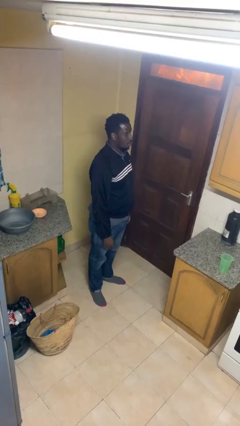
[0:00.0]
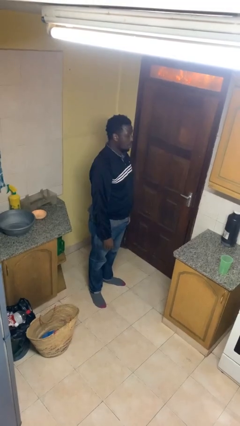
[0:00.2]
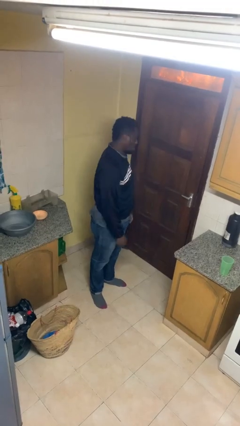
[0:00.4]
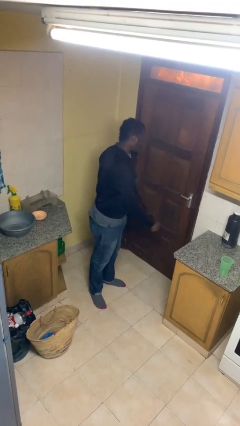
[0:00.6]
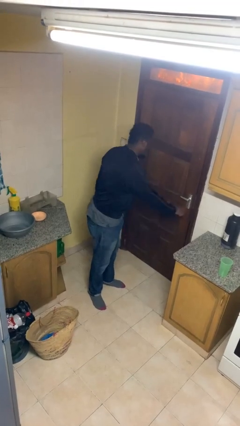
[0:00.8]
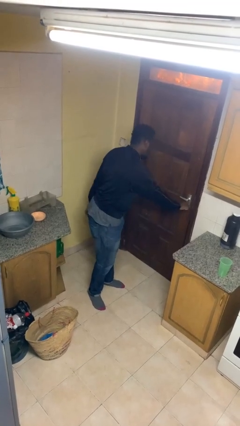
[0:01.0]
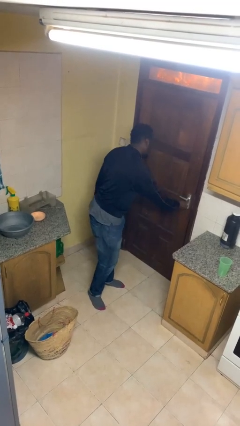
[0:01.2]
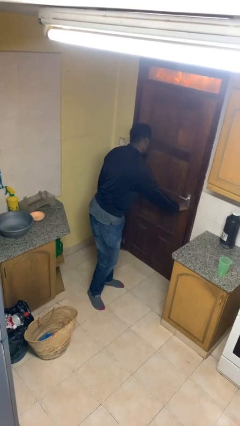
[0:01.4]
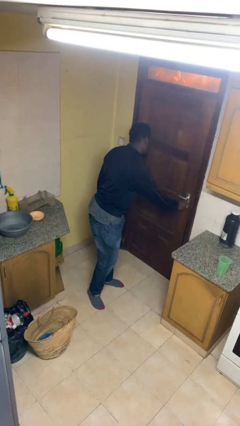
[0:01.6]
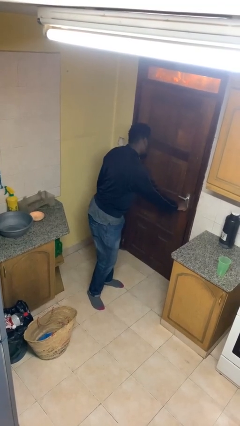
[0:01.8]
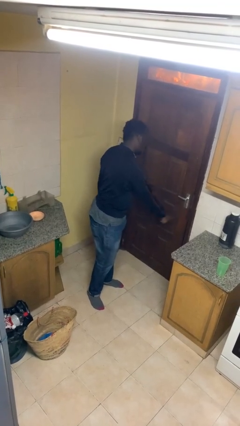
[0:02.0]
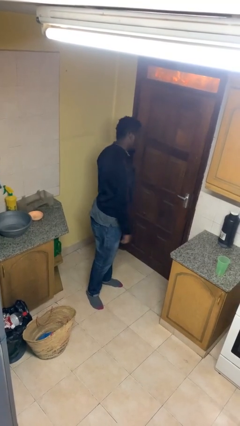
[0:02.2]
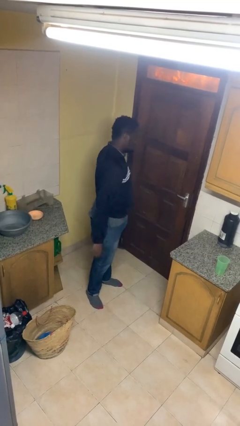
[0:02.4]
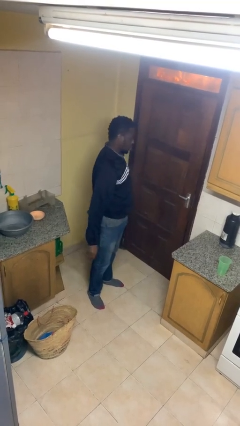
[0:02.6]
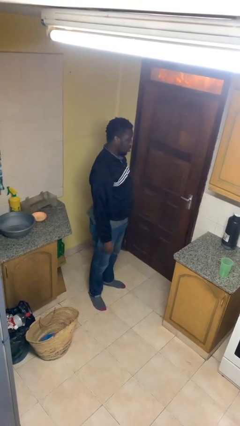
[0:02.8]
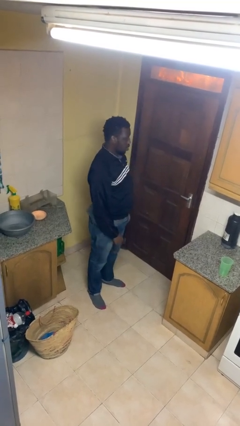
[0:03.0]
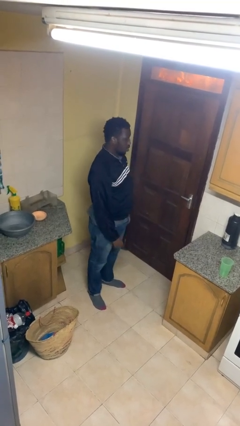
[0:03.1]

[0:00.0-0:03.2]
person unlocks door with keys

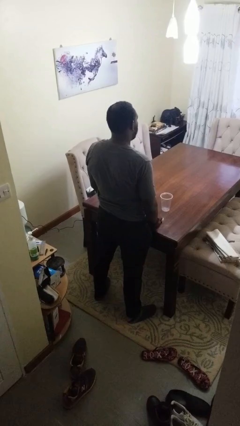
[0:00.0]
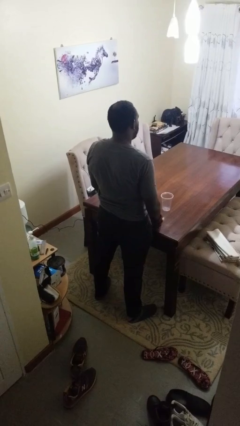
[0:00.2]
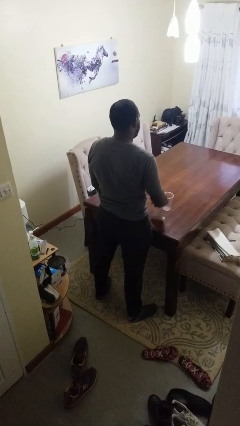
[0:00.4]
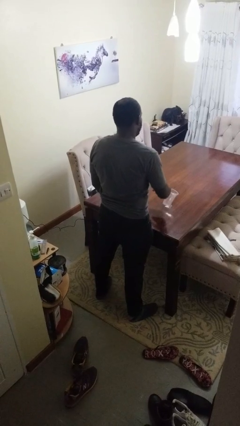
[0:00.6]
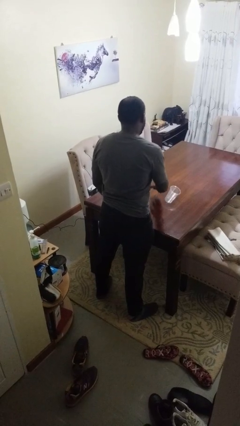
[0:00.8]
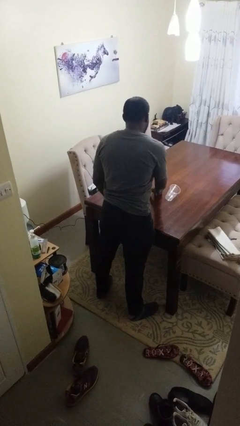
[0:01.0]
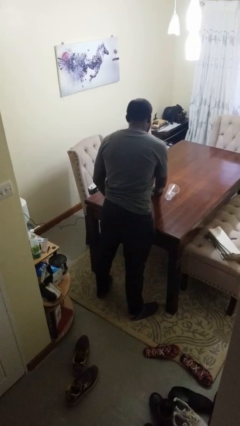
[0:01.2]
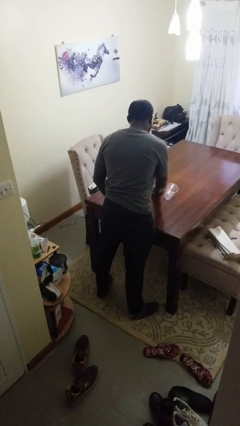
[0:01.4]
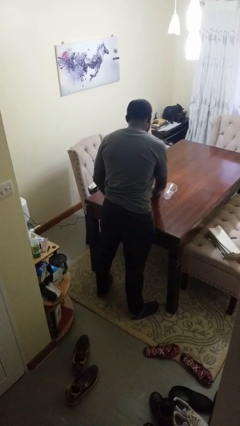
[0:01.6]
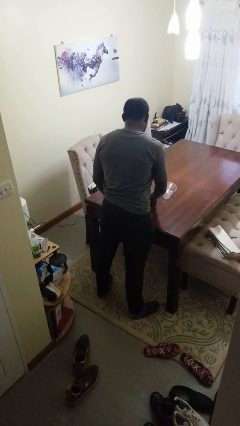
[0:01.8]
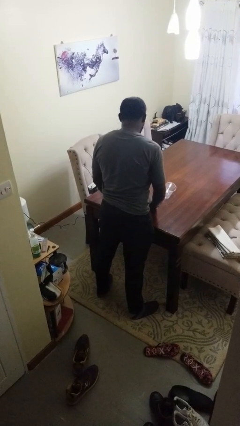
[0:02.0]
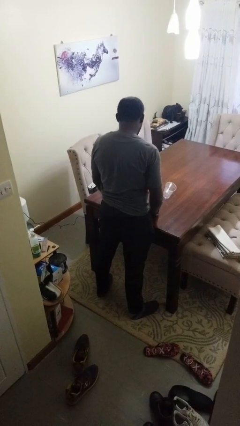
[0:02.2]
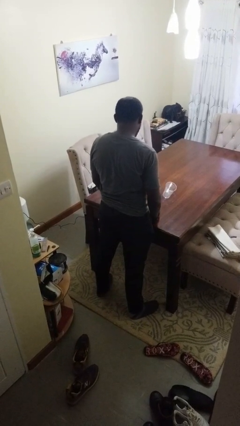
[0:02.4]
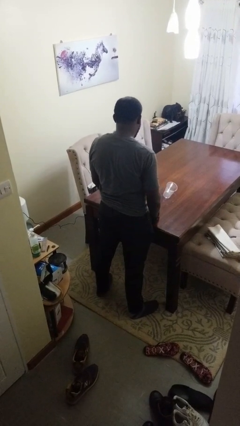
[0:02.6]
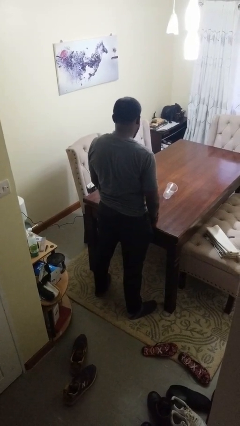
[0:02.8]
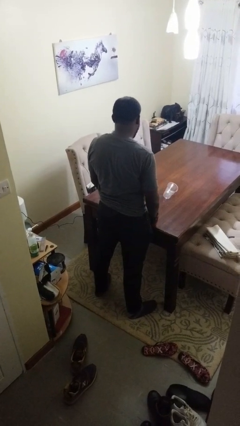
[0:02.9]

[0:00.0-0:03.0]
person knocks over glass

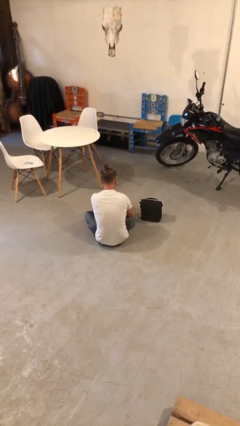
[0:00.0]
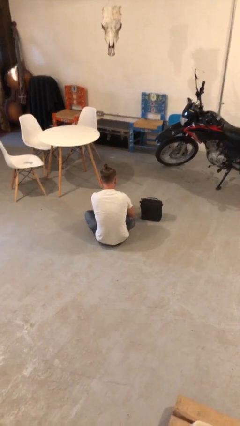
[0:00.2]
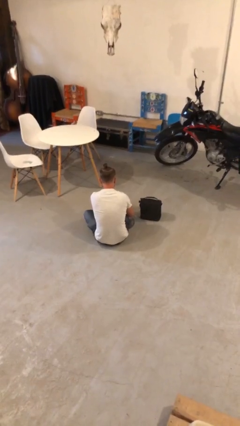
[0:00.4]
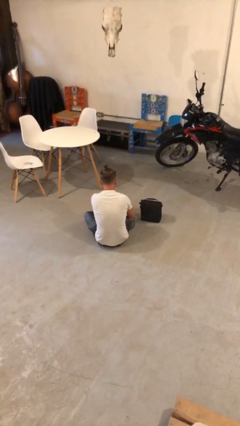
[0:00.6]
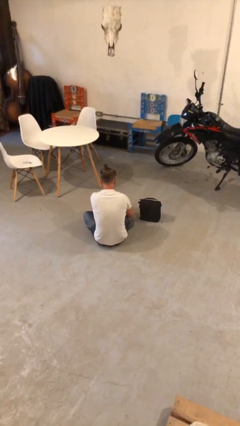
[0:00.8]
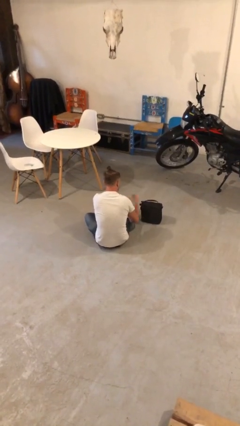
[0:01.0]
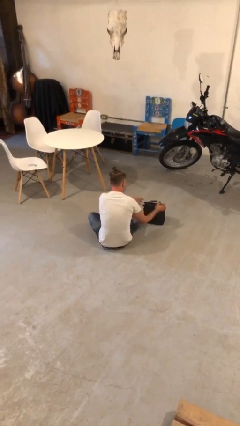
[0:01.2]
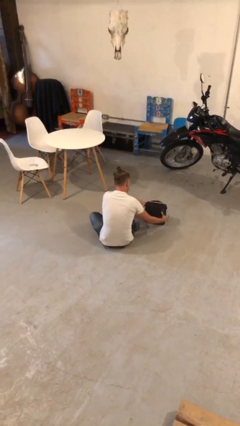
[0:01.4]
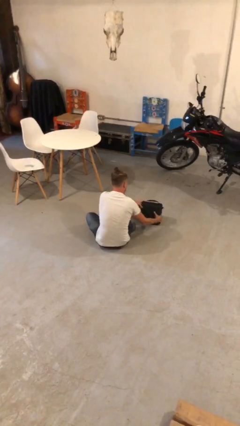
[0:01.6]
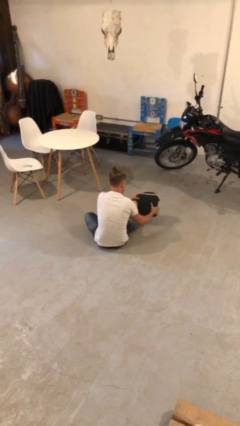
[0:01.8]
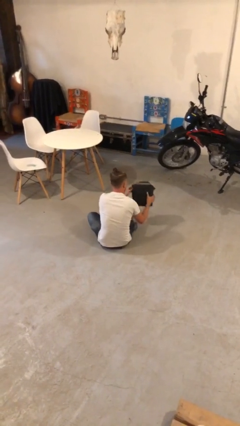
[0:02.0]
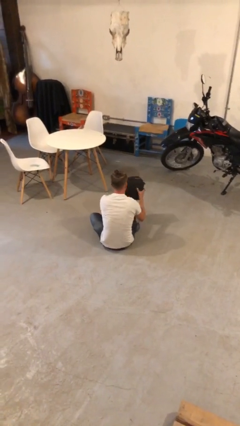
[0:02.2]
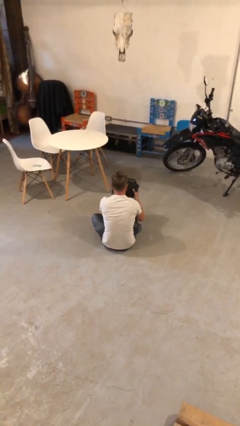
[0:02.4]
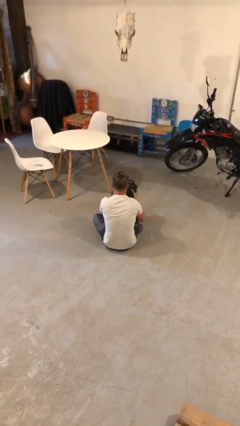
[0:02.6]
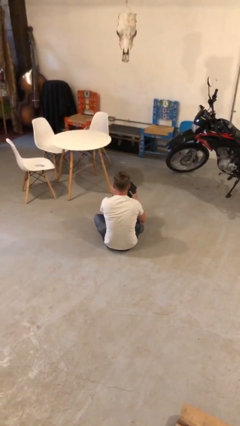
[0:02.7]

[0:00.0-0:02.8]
person picks up object from floor

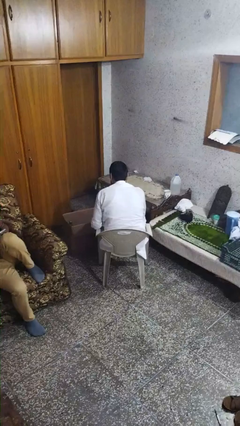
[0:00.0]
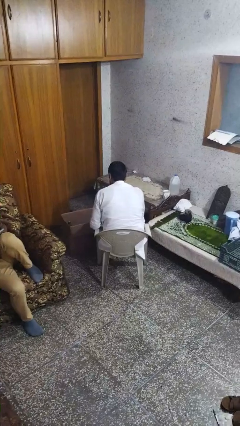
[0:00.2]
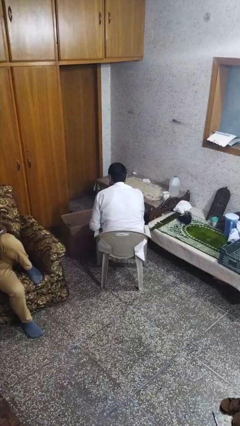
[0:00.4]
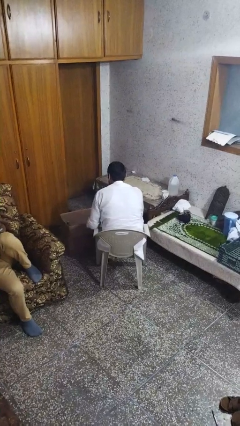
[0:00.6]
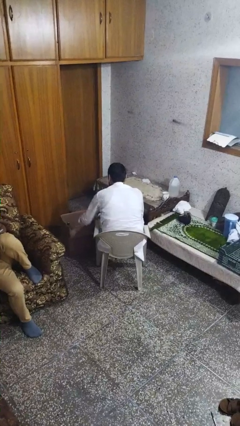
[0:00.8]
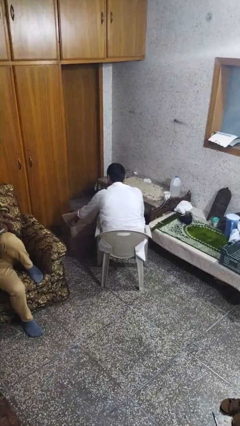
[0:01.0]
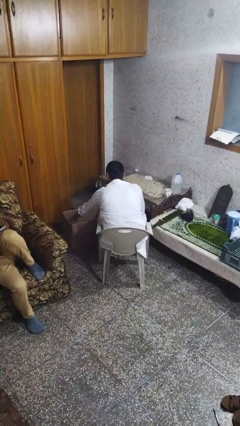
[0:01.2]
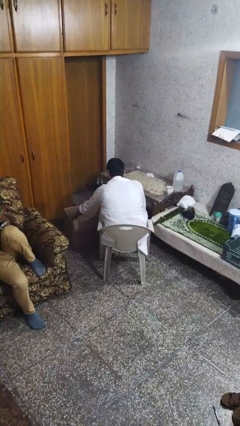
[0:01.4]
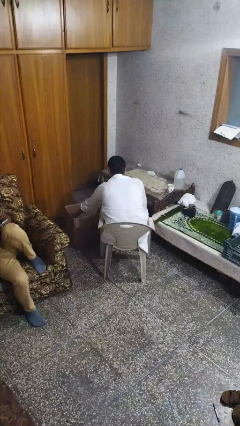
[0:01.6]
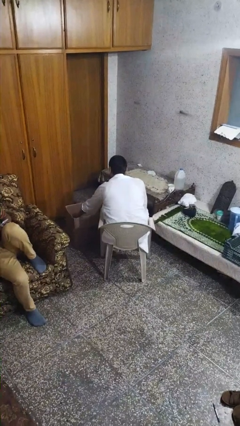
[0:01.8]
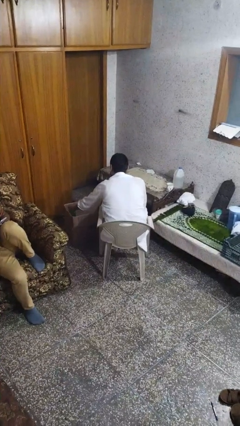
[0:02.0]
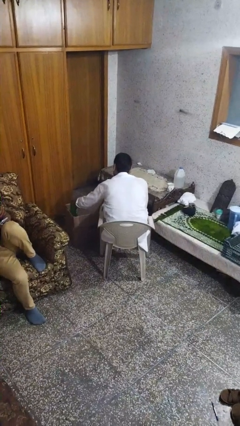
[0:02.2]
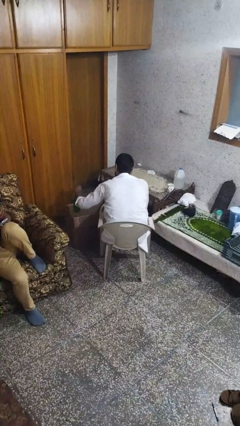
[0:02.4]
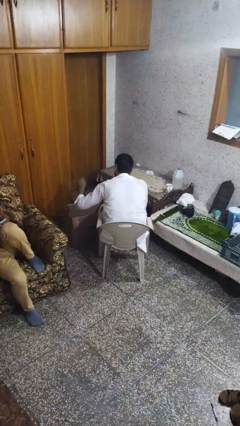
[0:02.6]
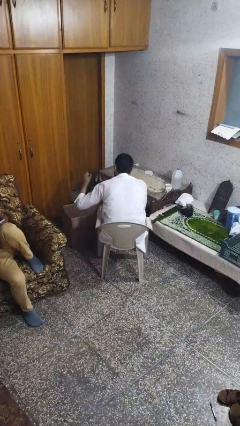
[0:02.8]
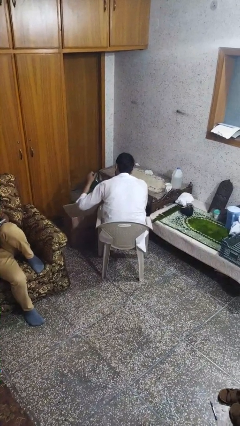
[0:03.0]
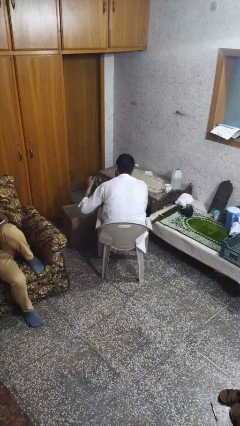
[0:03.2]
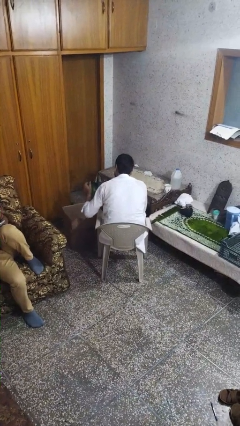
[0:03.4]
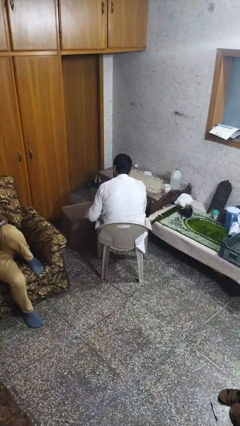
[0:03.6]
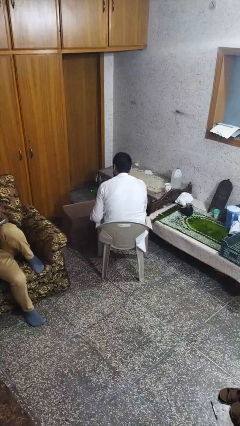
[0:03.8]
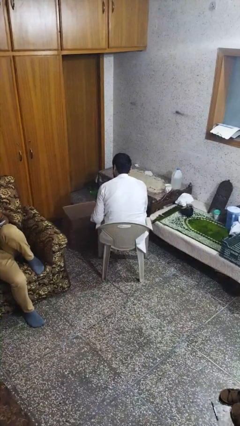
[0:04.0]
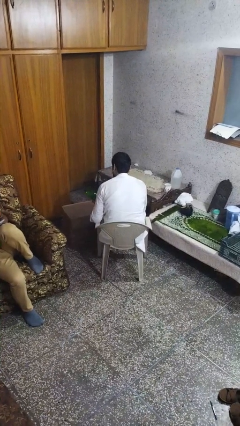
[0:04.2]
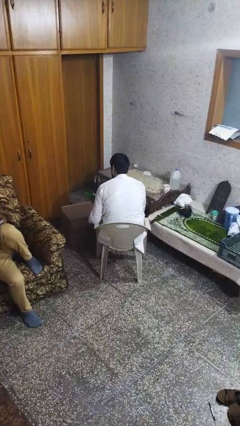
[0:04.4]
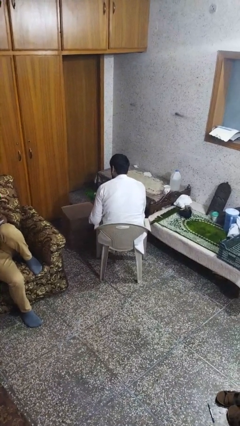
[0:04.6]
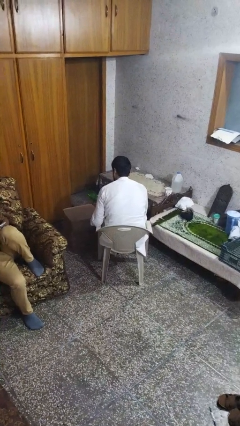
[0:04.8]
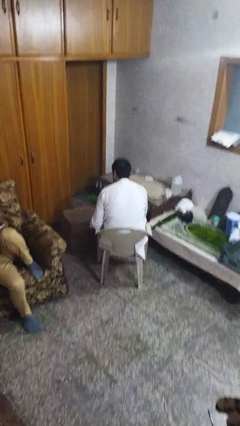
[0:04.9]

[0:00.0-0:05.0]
person takes object from box

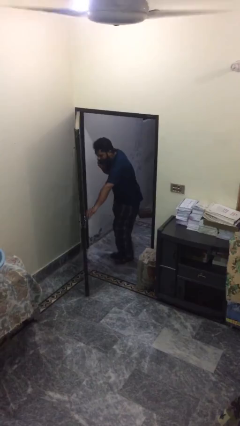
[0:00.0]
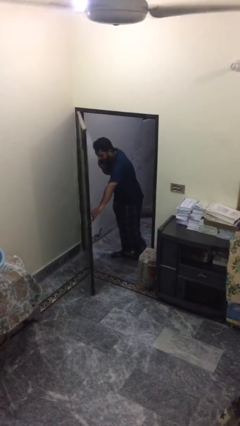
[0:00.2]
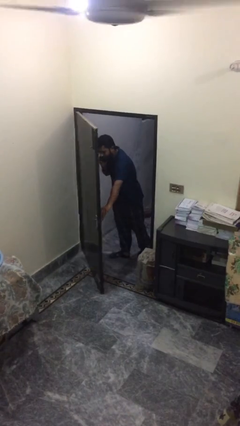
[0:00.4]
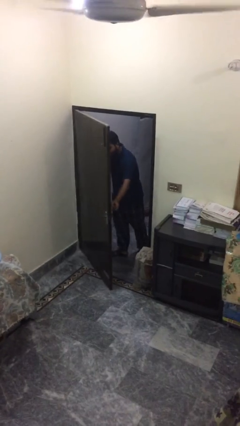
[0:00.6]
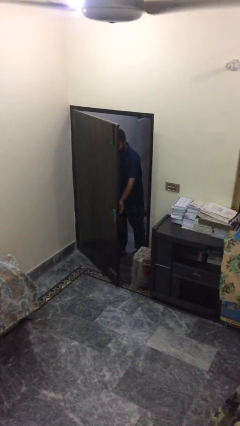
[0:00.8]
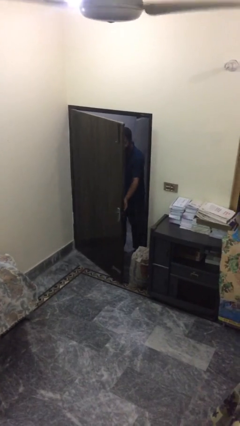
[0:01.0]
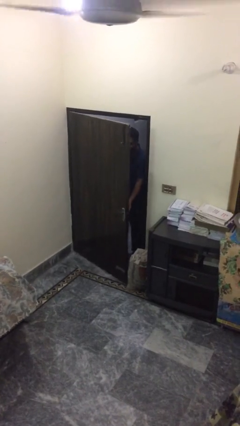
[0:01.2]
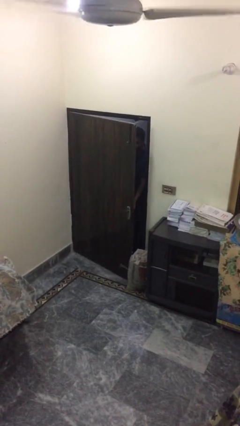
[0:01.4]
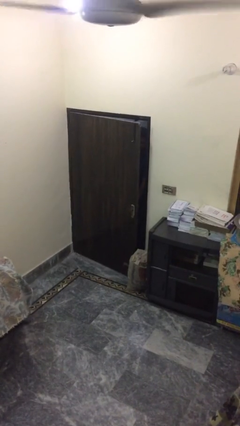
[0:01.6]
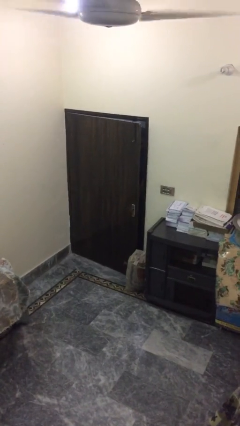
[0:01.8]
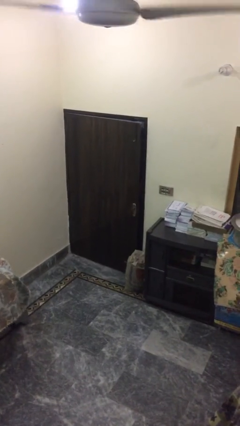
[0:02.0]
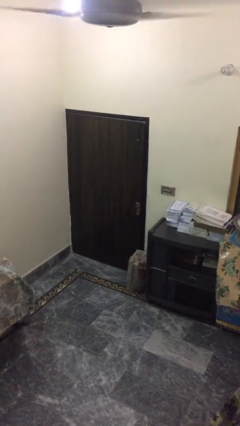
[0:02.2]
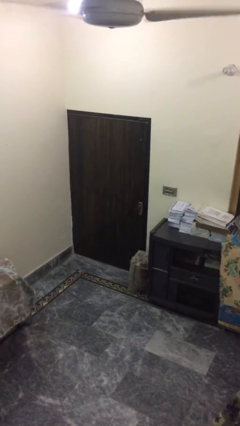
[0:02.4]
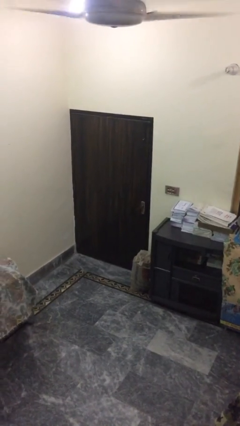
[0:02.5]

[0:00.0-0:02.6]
person closes facility door

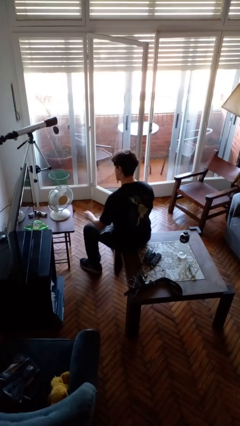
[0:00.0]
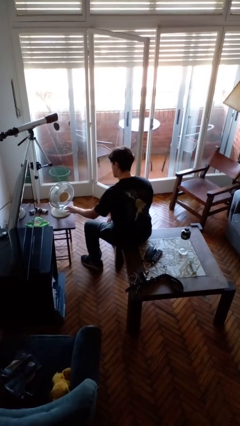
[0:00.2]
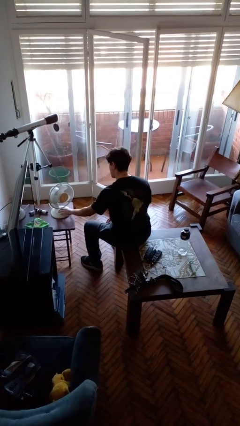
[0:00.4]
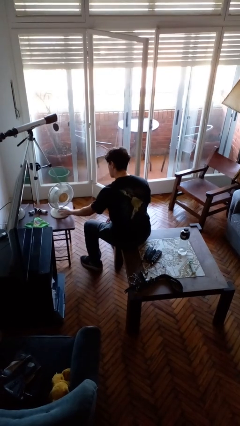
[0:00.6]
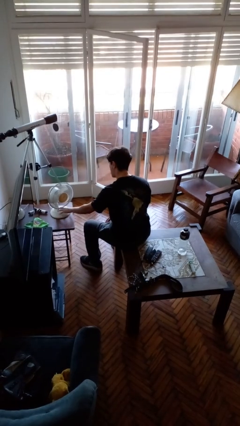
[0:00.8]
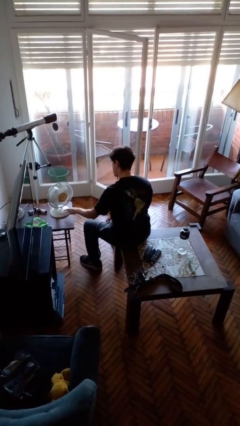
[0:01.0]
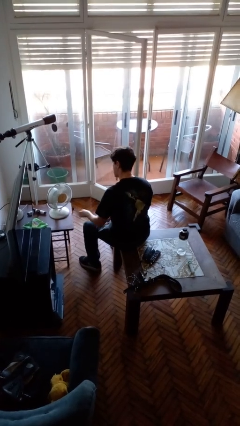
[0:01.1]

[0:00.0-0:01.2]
person turns on fan
